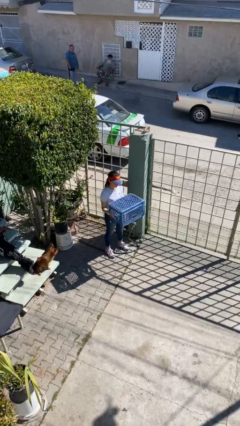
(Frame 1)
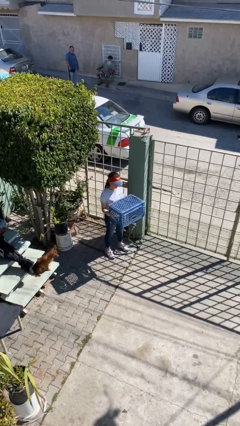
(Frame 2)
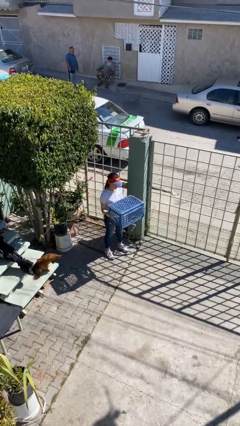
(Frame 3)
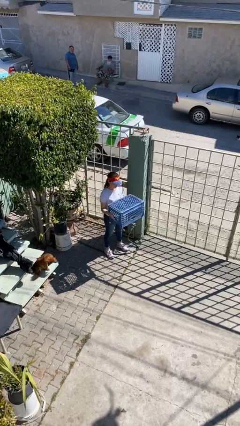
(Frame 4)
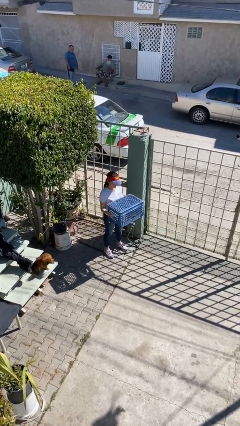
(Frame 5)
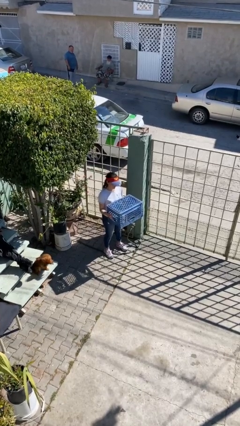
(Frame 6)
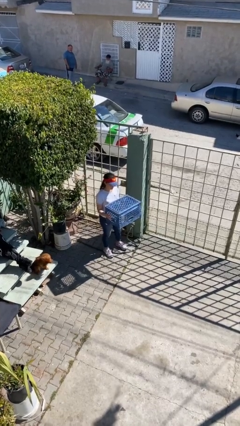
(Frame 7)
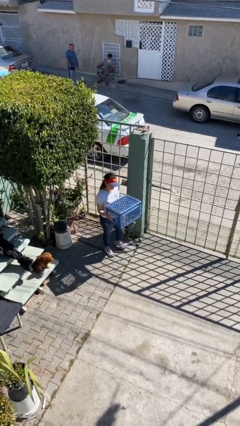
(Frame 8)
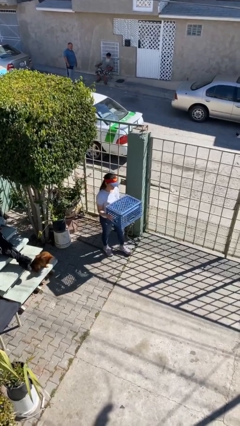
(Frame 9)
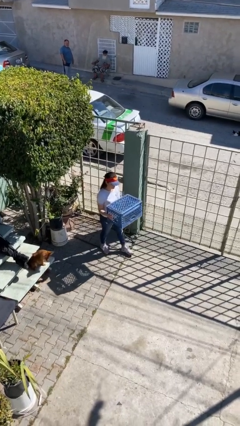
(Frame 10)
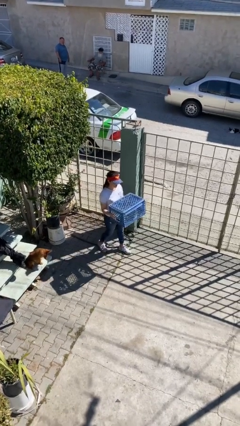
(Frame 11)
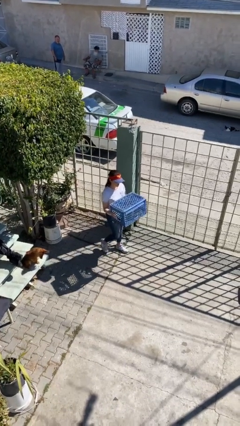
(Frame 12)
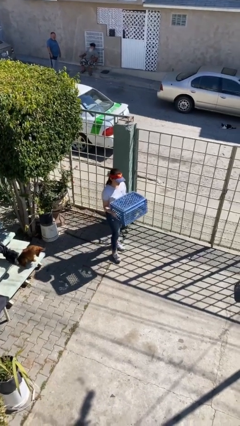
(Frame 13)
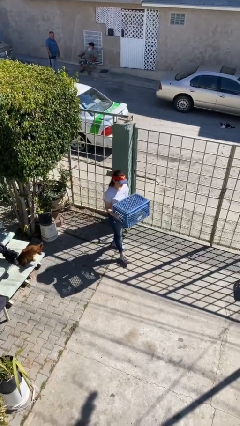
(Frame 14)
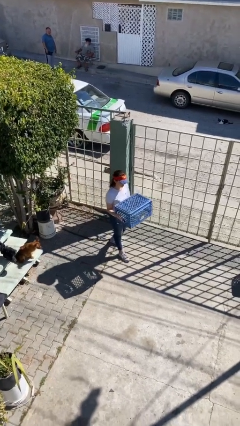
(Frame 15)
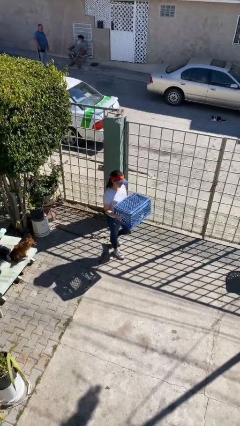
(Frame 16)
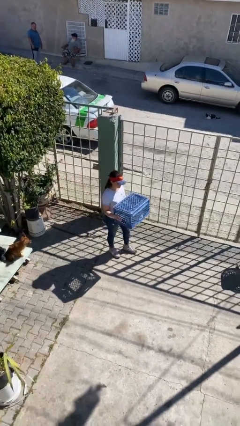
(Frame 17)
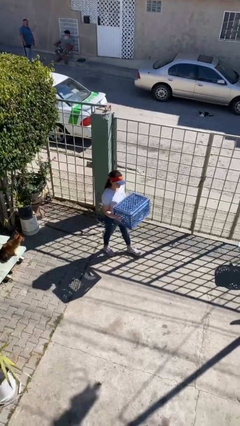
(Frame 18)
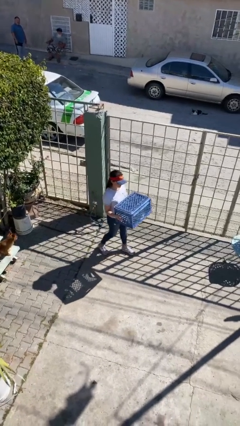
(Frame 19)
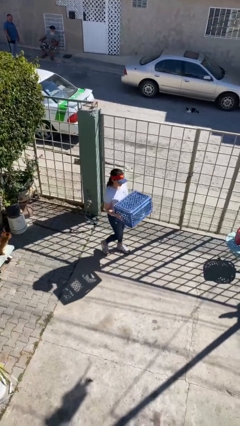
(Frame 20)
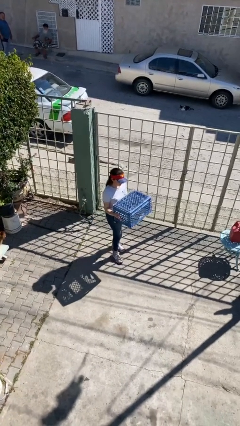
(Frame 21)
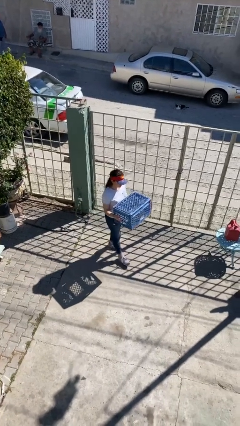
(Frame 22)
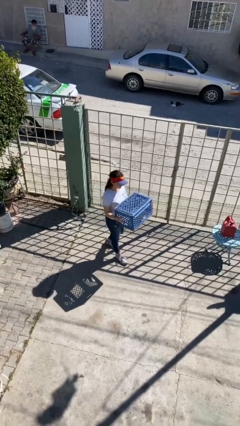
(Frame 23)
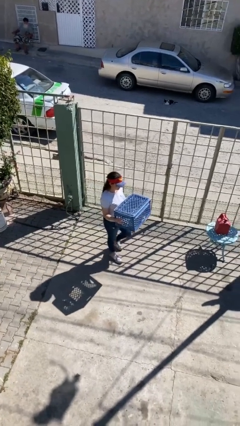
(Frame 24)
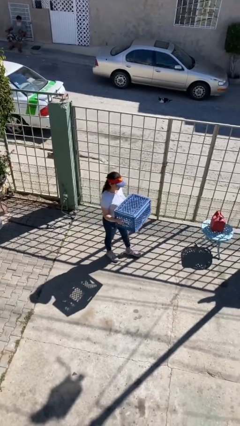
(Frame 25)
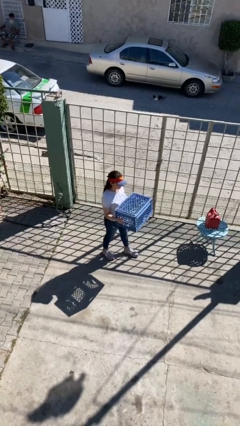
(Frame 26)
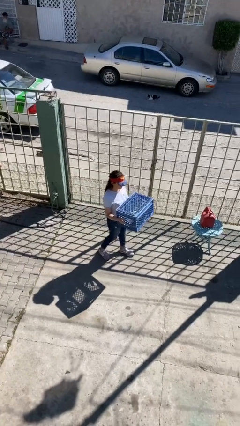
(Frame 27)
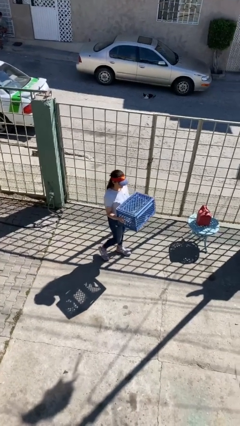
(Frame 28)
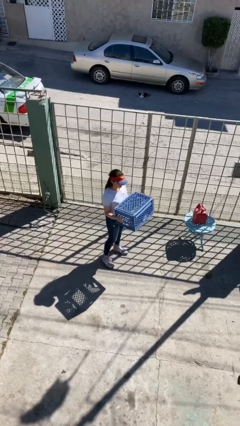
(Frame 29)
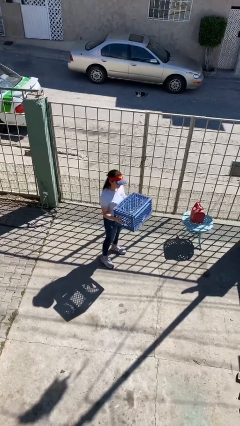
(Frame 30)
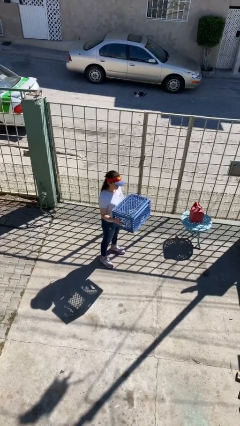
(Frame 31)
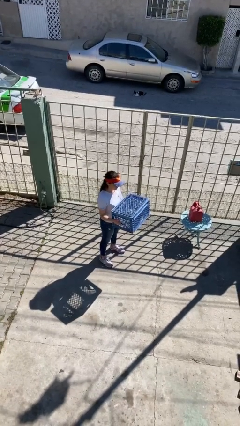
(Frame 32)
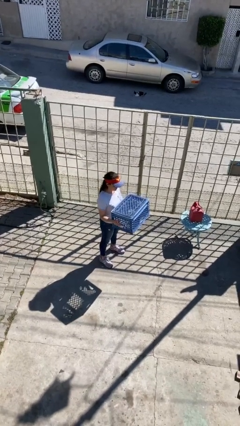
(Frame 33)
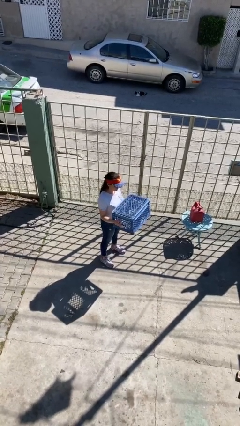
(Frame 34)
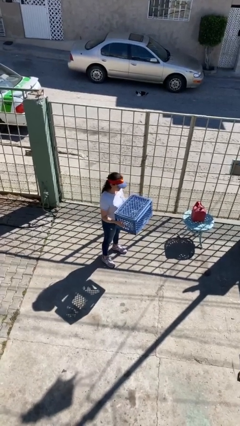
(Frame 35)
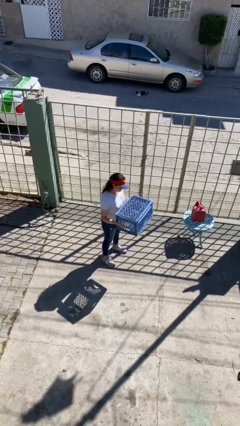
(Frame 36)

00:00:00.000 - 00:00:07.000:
person carries heavy object

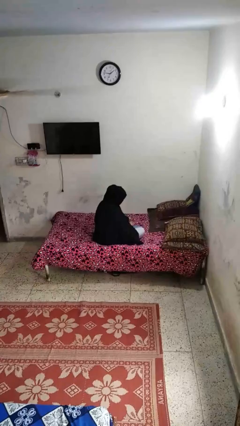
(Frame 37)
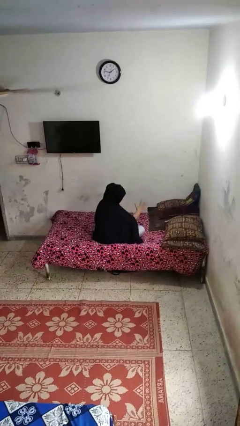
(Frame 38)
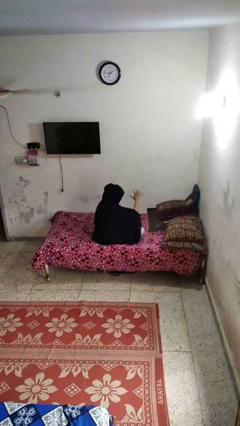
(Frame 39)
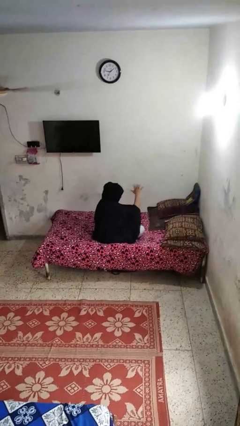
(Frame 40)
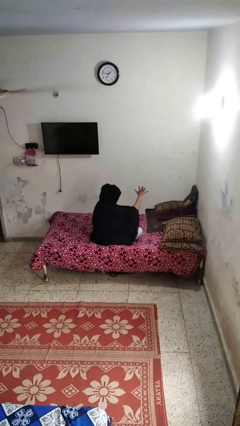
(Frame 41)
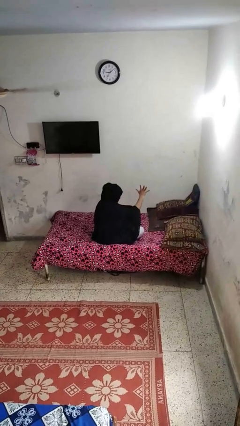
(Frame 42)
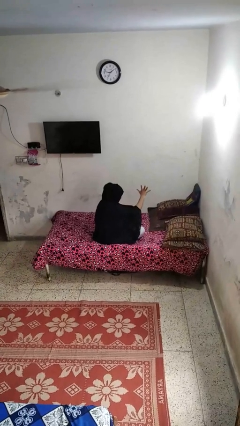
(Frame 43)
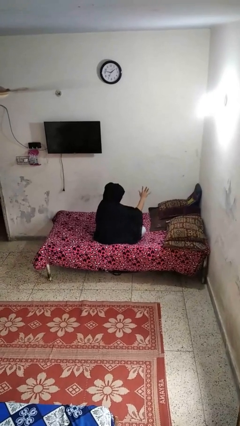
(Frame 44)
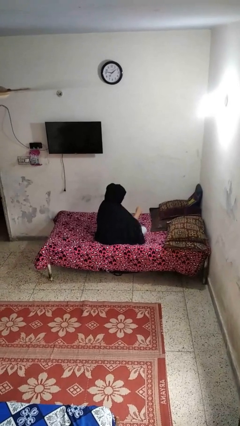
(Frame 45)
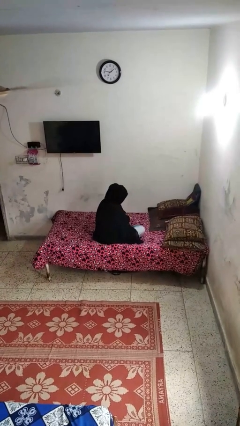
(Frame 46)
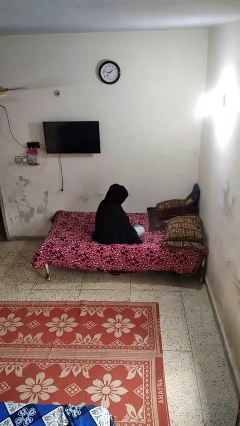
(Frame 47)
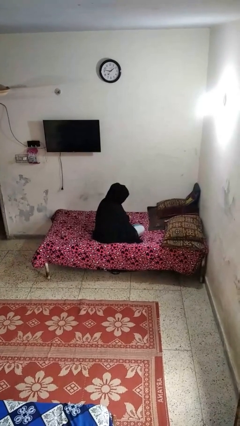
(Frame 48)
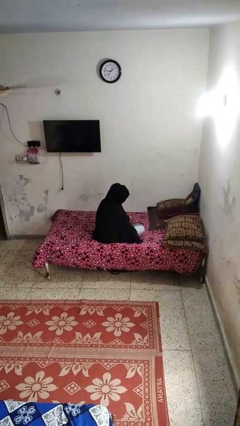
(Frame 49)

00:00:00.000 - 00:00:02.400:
person gestures number five

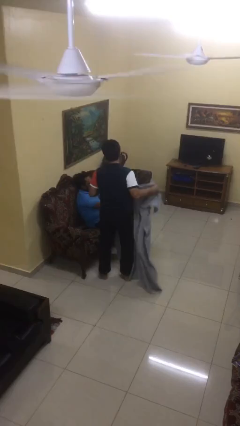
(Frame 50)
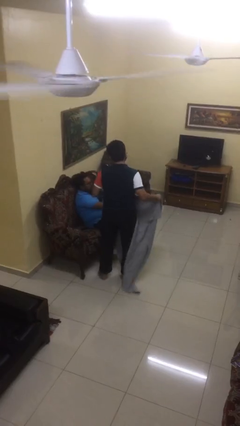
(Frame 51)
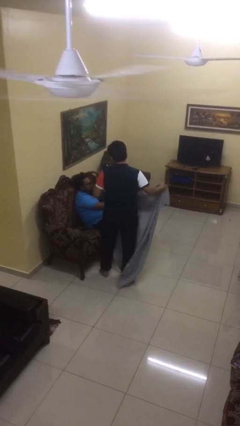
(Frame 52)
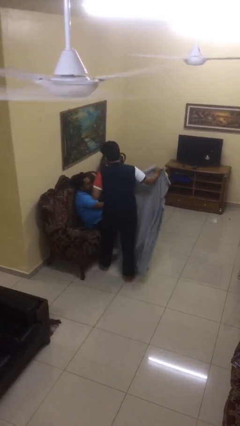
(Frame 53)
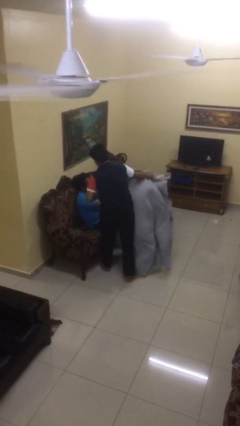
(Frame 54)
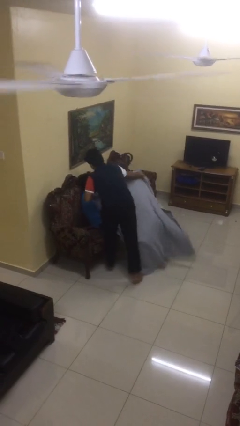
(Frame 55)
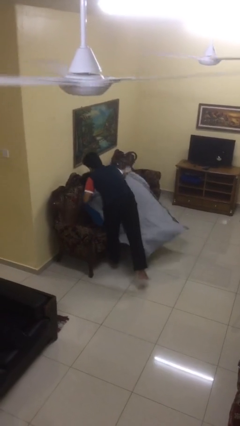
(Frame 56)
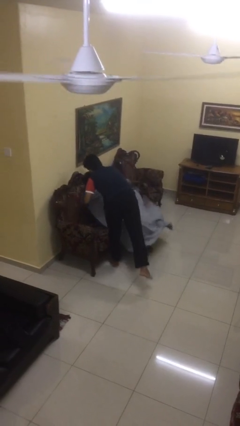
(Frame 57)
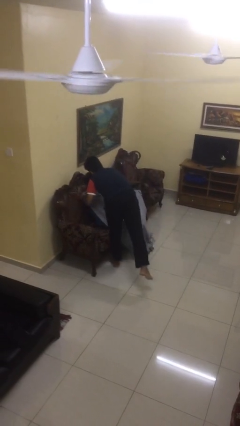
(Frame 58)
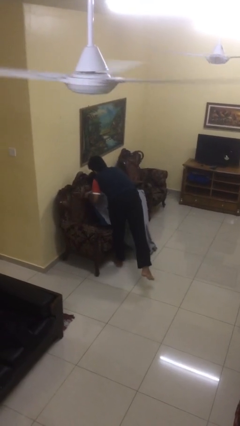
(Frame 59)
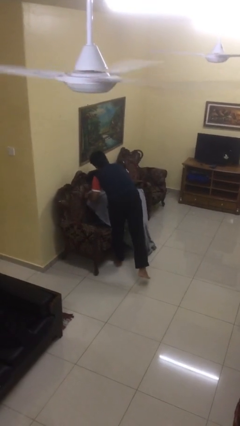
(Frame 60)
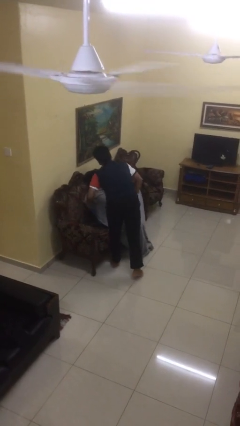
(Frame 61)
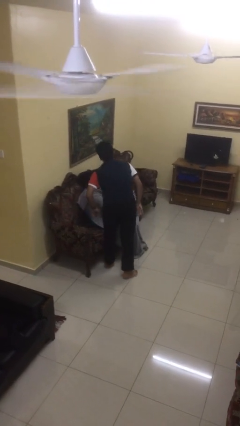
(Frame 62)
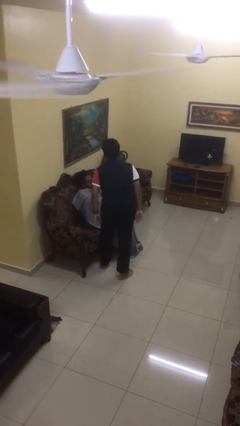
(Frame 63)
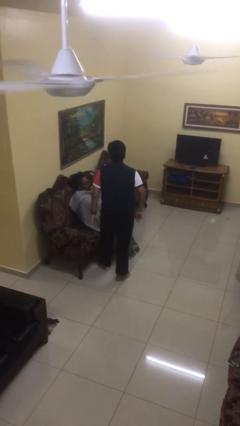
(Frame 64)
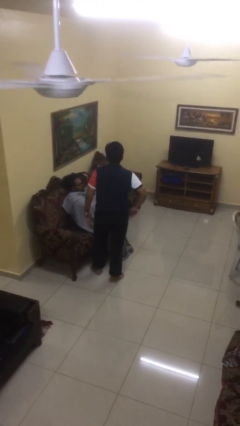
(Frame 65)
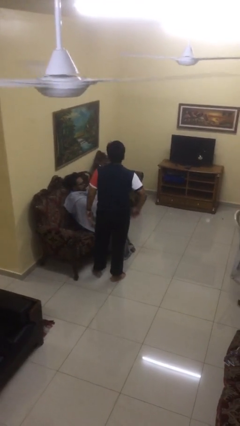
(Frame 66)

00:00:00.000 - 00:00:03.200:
person covers friend with blanket

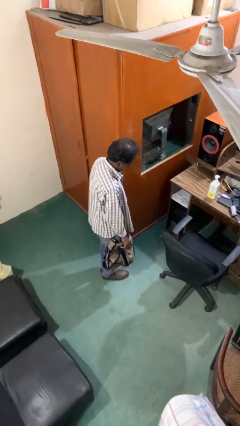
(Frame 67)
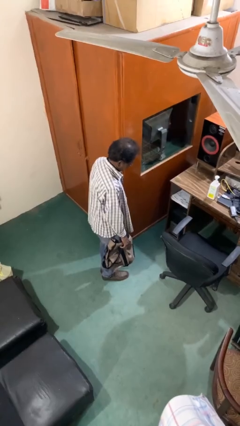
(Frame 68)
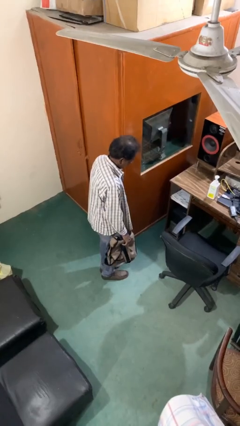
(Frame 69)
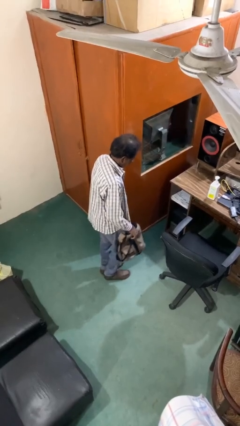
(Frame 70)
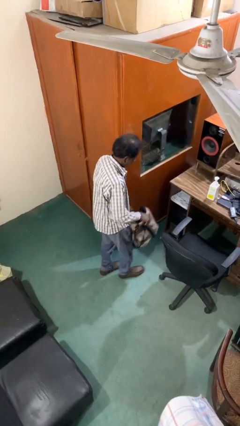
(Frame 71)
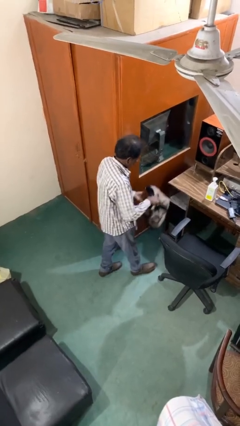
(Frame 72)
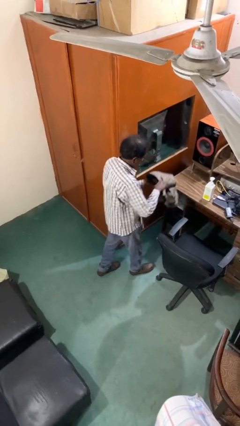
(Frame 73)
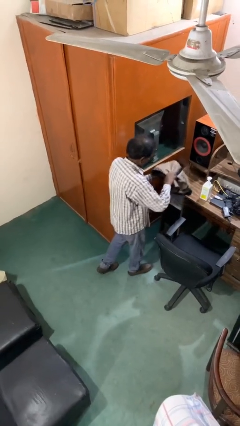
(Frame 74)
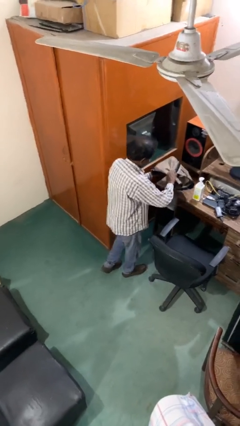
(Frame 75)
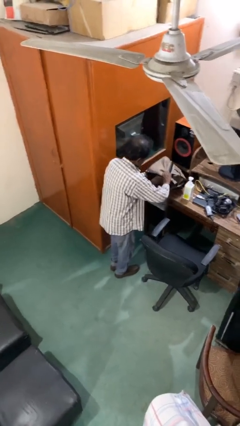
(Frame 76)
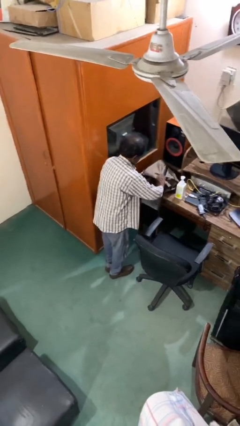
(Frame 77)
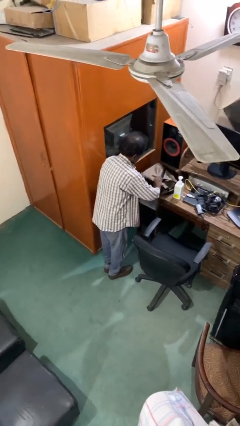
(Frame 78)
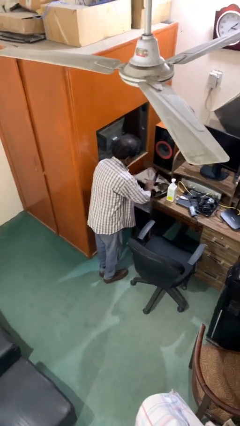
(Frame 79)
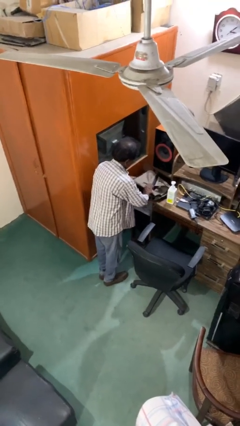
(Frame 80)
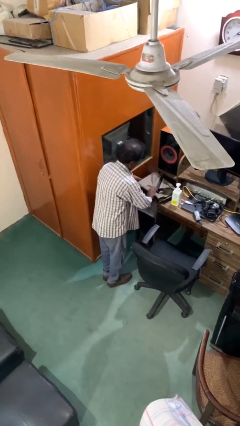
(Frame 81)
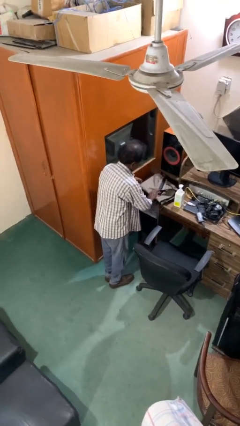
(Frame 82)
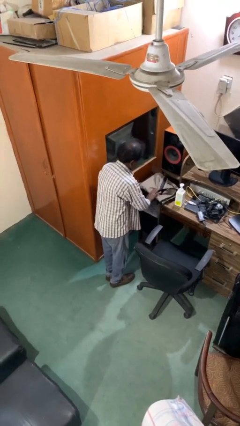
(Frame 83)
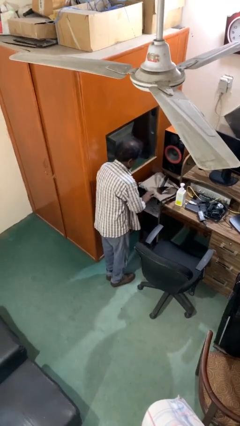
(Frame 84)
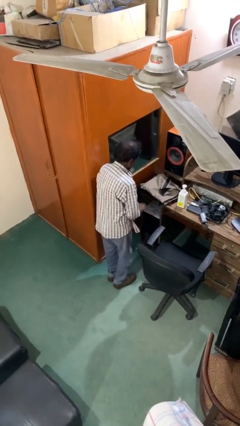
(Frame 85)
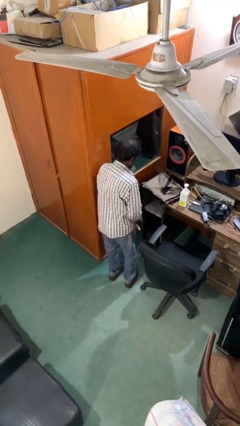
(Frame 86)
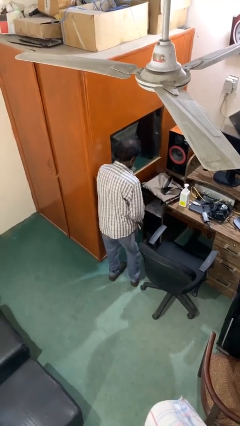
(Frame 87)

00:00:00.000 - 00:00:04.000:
person puts down object on table

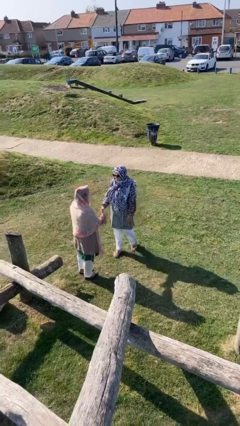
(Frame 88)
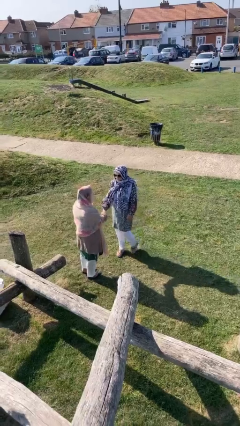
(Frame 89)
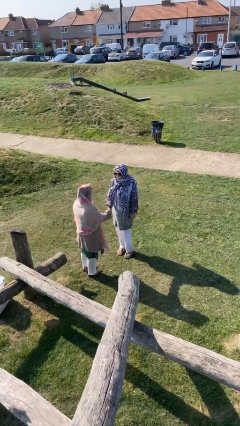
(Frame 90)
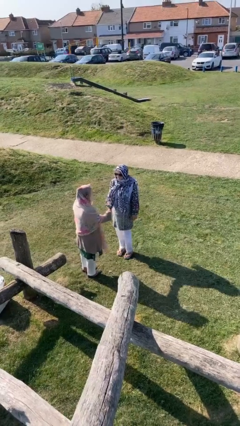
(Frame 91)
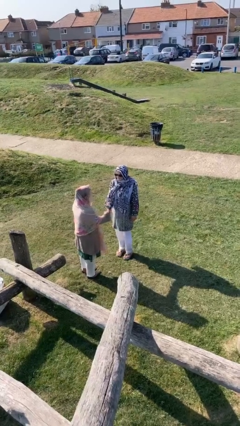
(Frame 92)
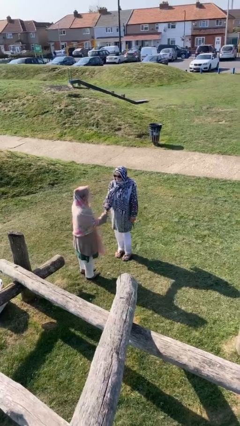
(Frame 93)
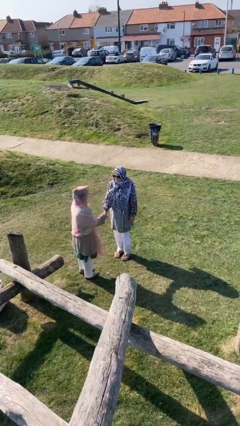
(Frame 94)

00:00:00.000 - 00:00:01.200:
person shakes hand
